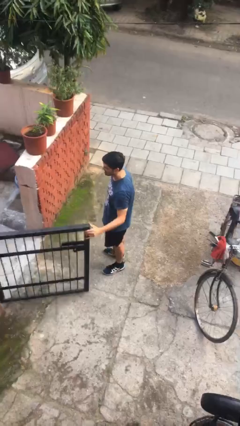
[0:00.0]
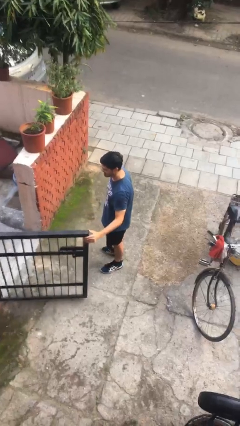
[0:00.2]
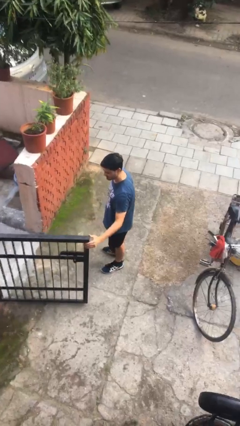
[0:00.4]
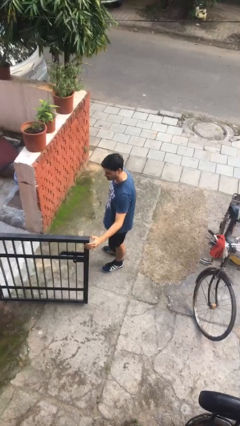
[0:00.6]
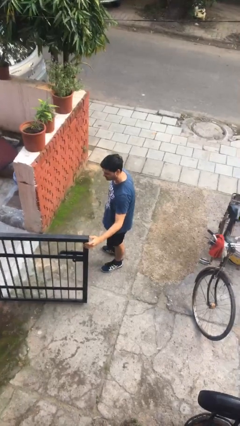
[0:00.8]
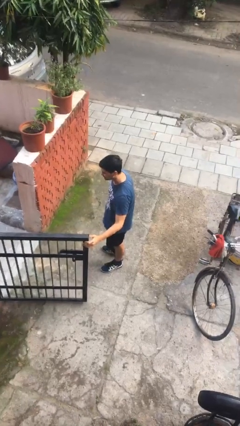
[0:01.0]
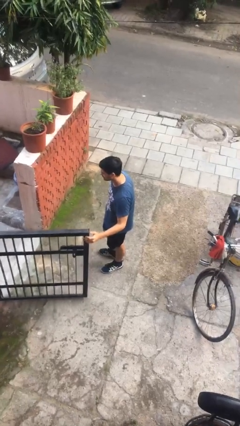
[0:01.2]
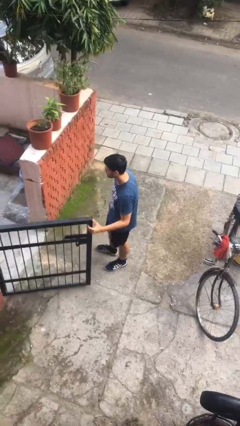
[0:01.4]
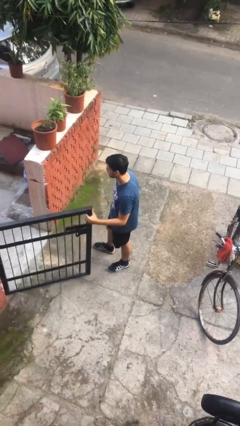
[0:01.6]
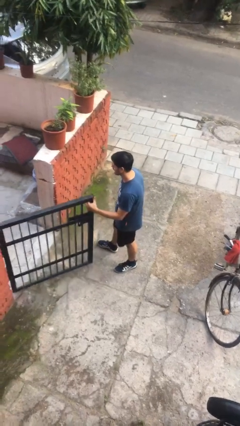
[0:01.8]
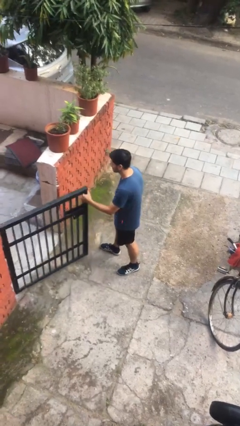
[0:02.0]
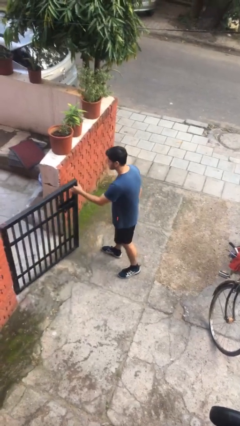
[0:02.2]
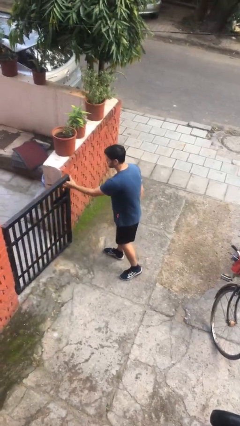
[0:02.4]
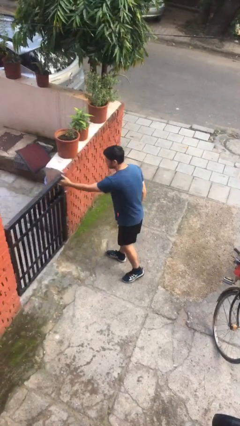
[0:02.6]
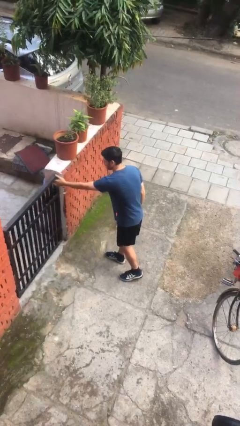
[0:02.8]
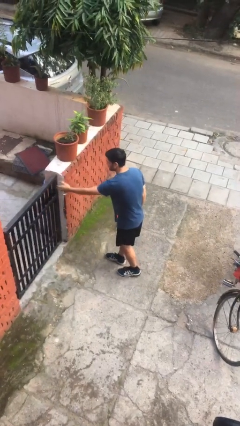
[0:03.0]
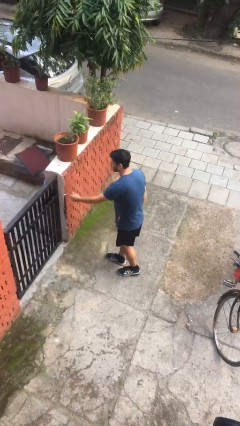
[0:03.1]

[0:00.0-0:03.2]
person closes gate

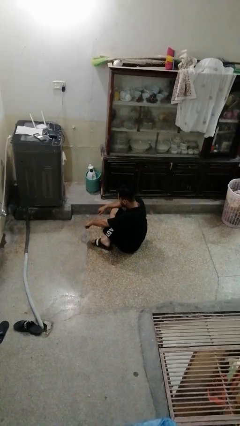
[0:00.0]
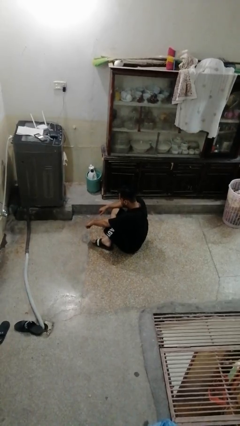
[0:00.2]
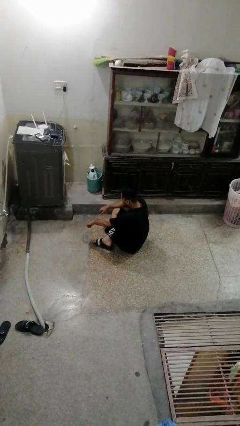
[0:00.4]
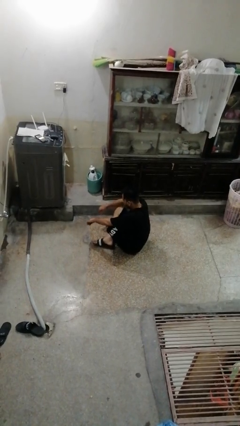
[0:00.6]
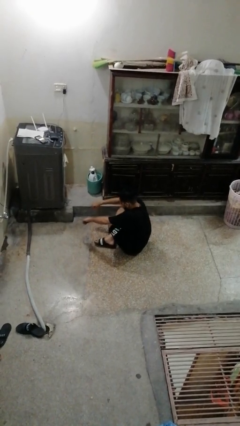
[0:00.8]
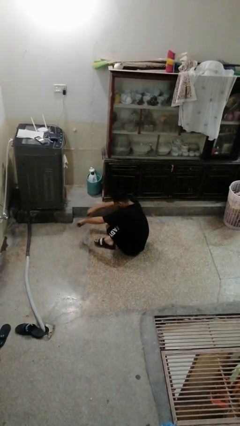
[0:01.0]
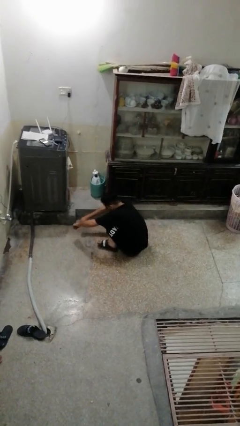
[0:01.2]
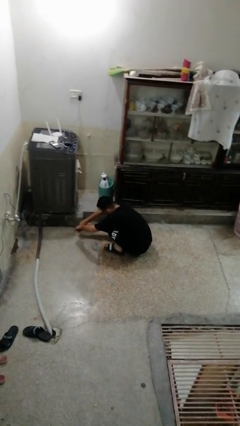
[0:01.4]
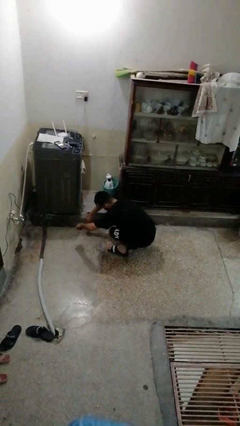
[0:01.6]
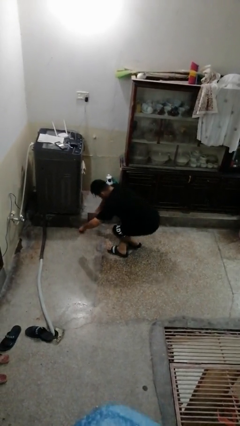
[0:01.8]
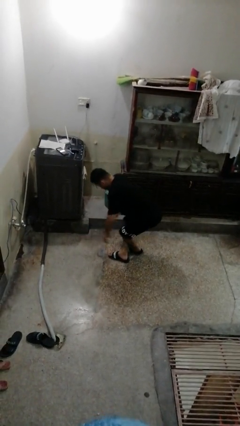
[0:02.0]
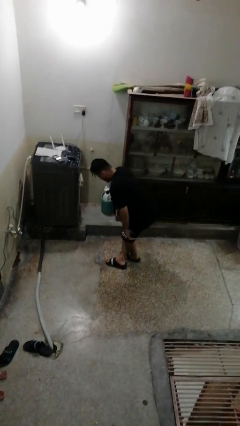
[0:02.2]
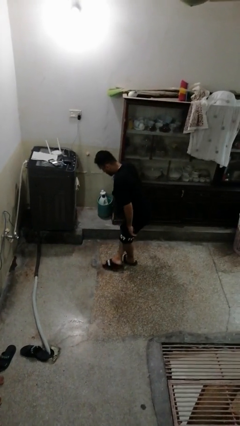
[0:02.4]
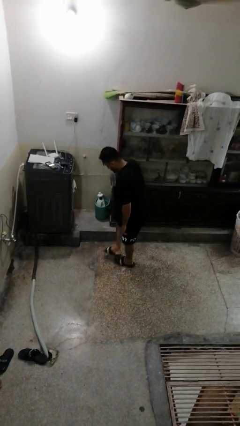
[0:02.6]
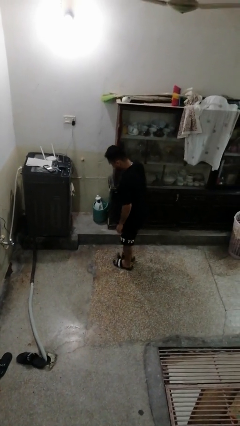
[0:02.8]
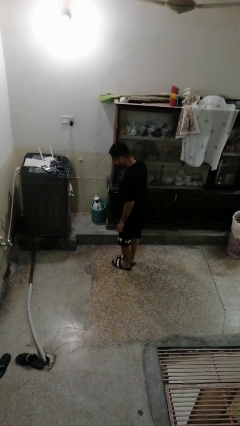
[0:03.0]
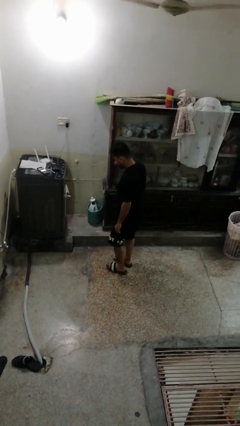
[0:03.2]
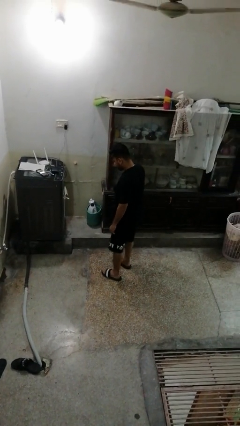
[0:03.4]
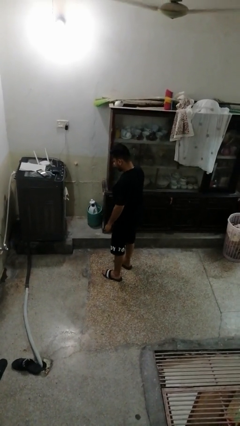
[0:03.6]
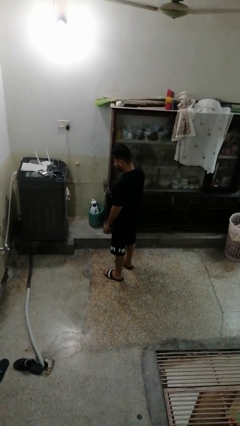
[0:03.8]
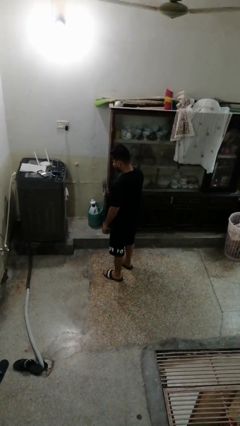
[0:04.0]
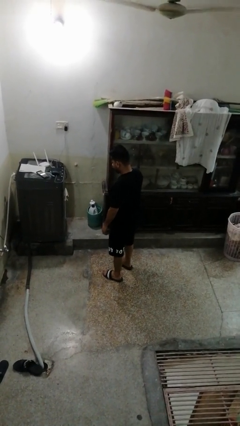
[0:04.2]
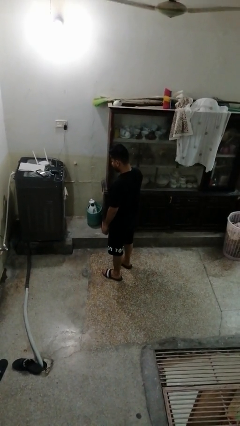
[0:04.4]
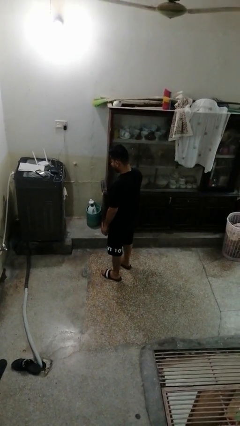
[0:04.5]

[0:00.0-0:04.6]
person stands up from floor

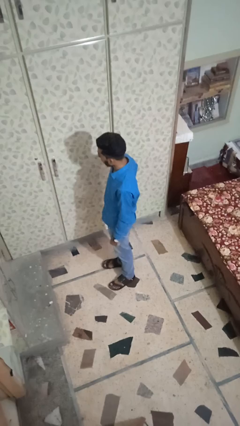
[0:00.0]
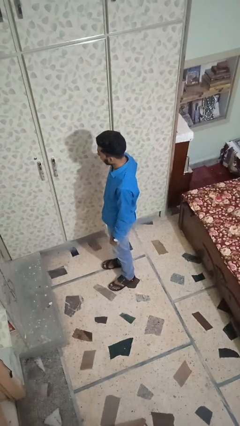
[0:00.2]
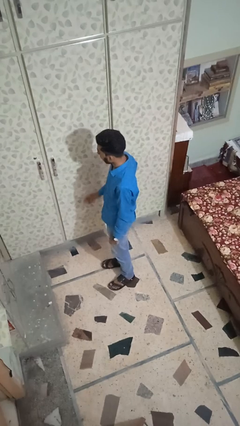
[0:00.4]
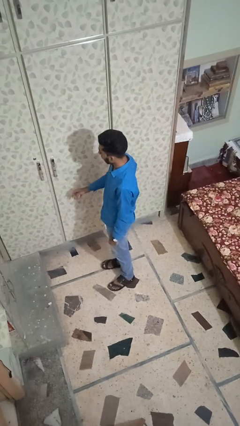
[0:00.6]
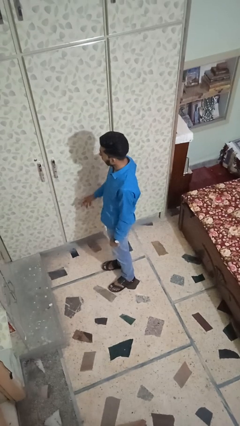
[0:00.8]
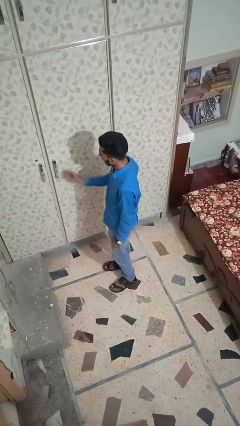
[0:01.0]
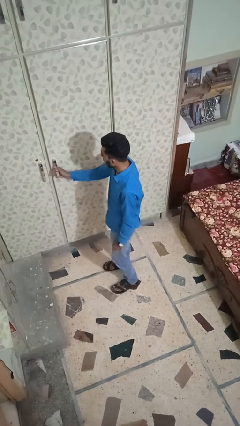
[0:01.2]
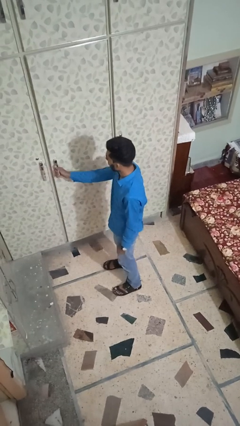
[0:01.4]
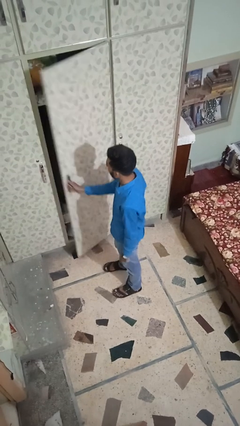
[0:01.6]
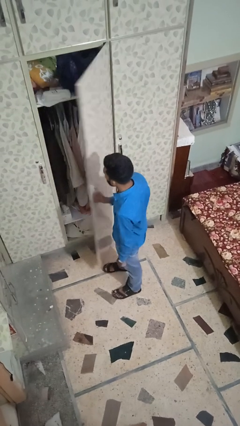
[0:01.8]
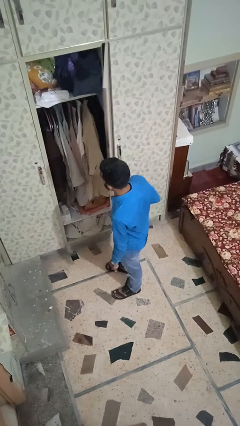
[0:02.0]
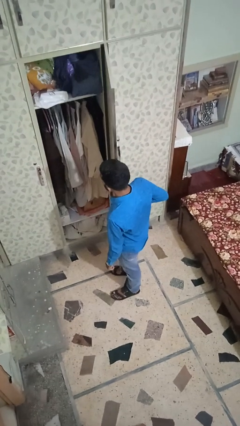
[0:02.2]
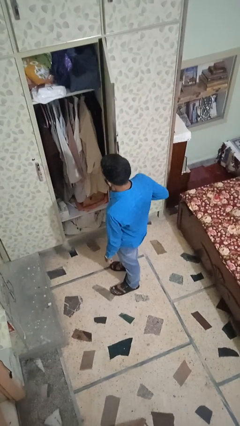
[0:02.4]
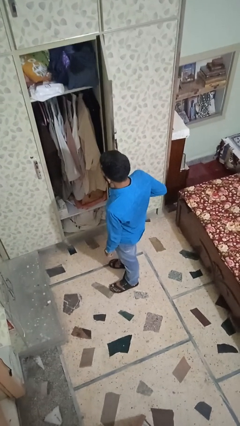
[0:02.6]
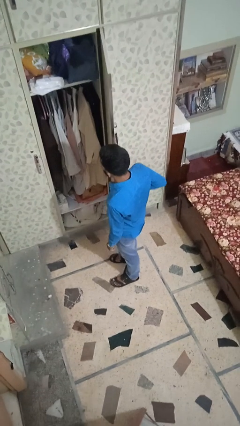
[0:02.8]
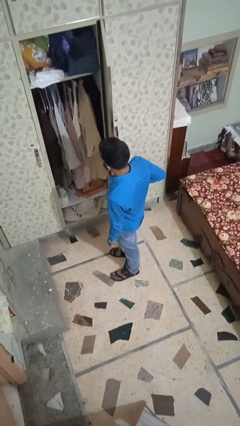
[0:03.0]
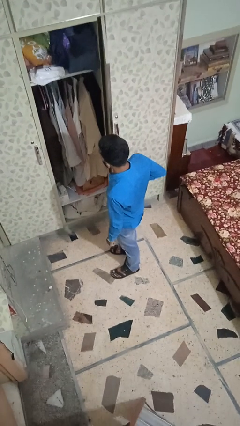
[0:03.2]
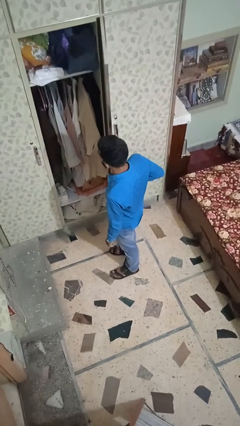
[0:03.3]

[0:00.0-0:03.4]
person opens closet door

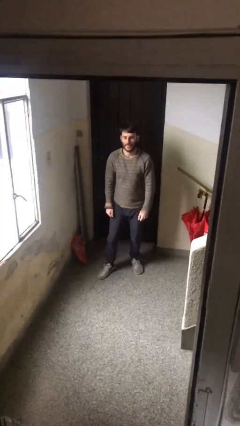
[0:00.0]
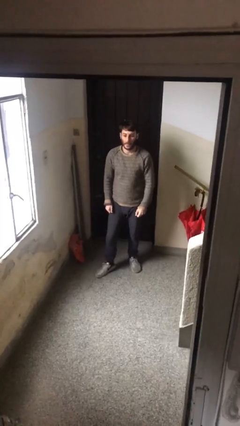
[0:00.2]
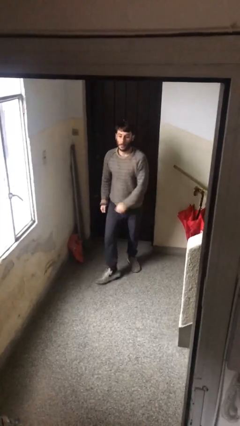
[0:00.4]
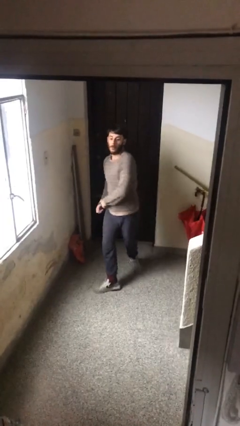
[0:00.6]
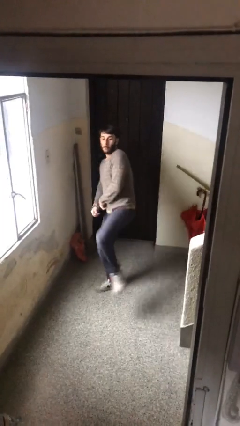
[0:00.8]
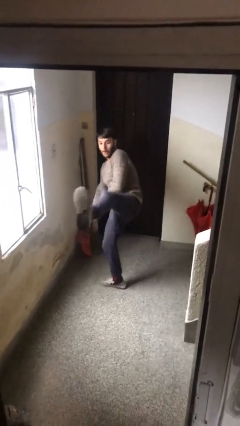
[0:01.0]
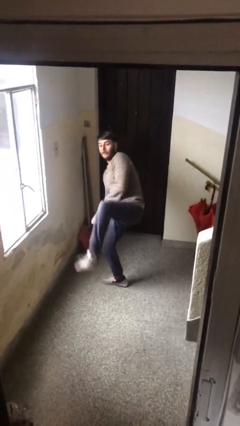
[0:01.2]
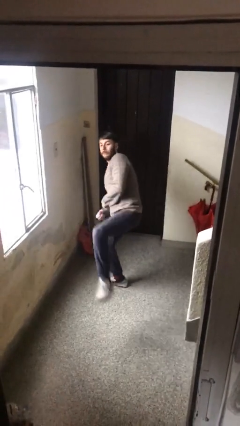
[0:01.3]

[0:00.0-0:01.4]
person karate kicks

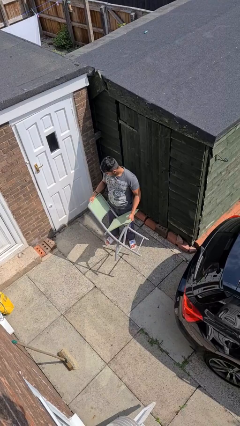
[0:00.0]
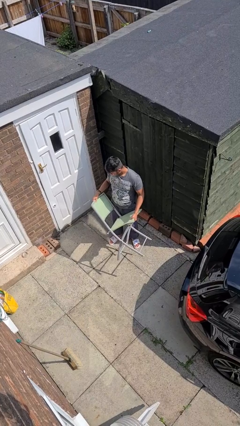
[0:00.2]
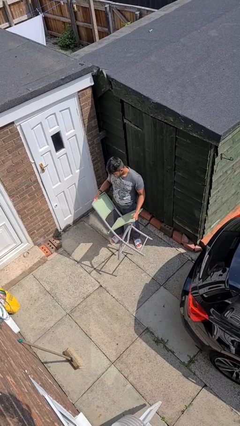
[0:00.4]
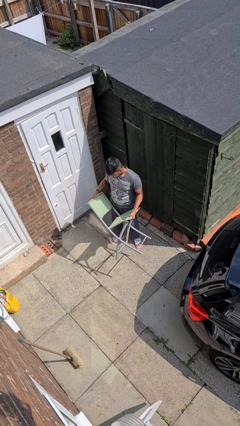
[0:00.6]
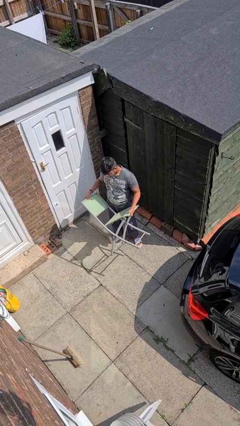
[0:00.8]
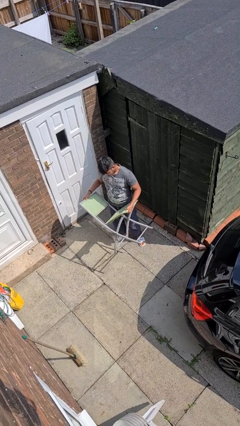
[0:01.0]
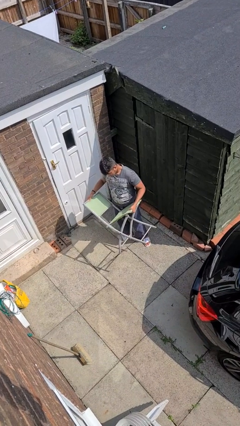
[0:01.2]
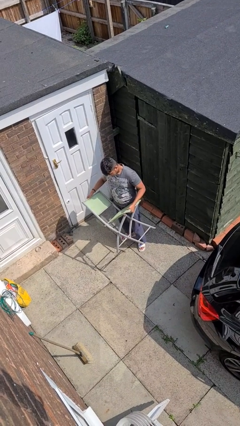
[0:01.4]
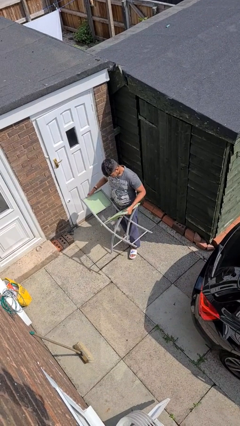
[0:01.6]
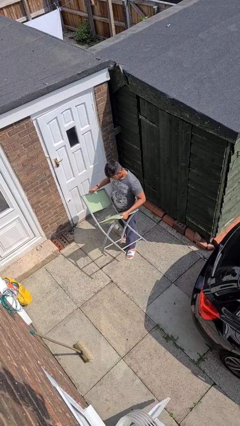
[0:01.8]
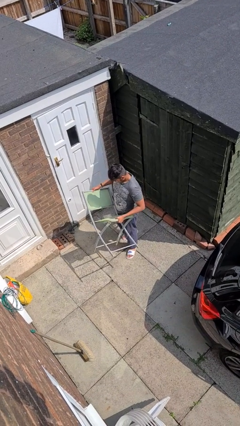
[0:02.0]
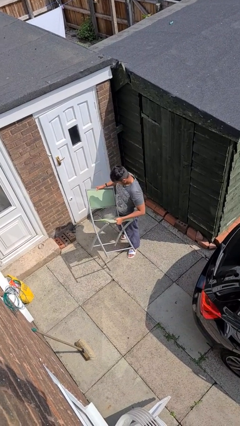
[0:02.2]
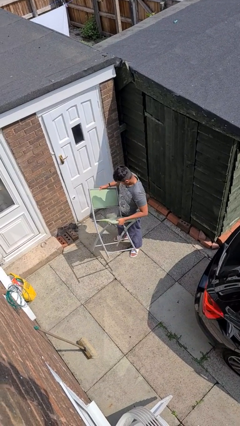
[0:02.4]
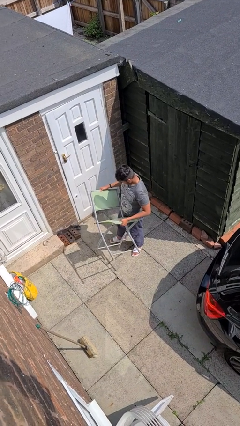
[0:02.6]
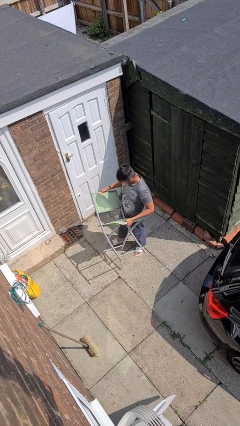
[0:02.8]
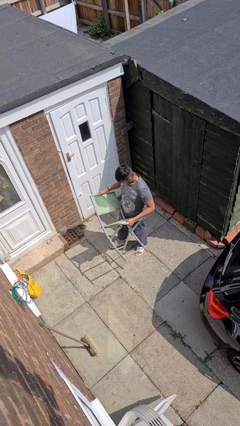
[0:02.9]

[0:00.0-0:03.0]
person carries furniture

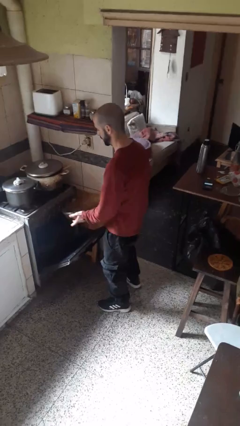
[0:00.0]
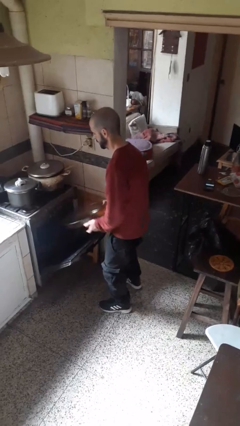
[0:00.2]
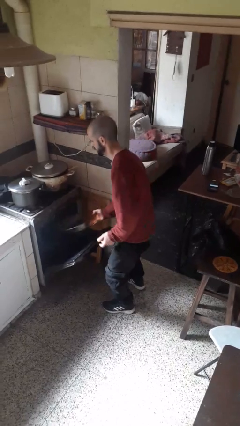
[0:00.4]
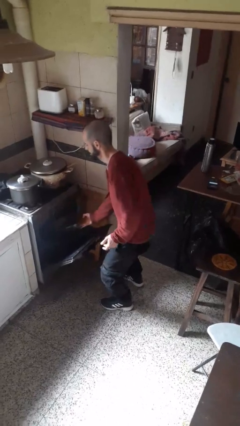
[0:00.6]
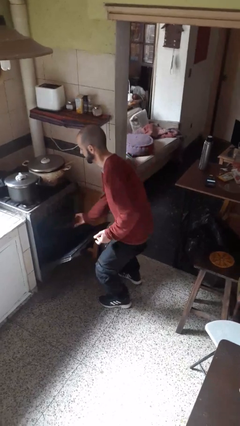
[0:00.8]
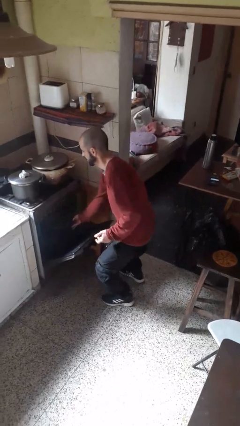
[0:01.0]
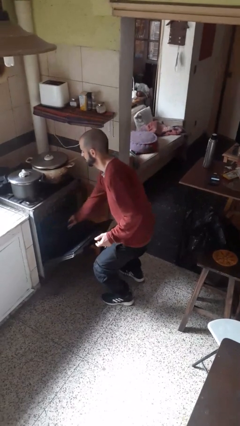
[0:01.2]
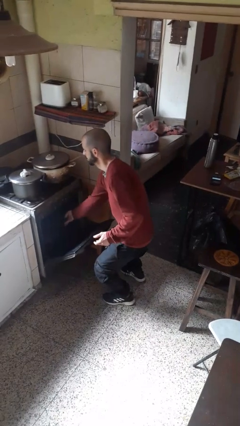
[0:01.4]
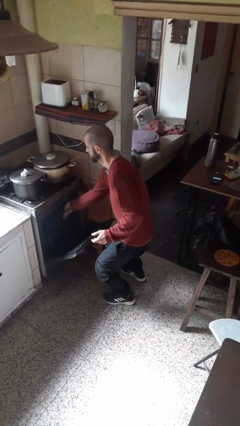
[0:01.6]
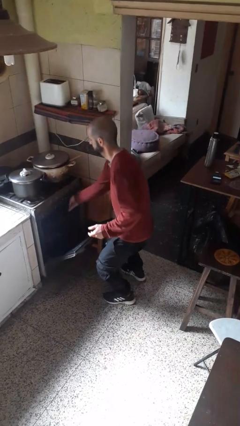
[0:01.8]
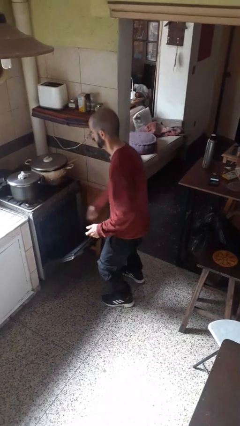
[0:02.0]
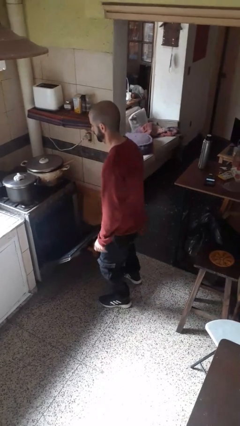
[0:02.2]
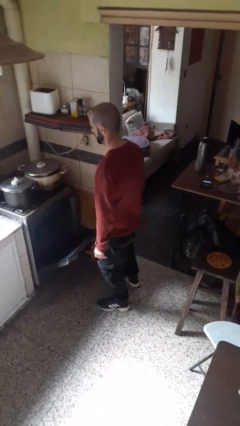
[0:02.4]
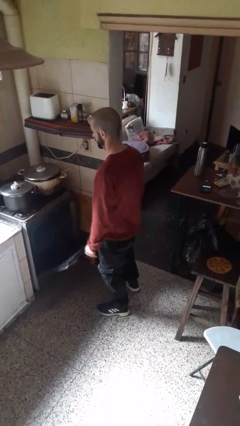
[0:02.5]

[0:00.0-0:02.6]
person puts object into oven
